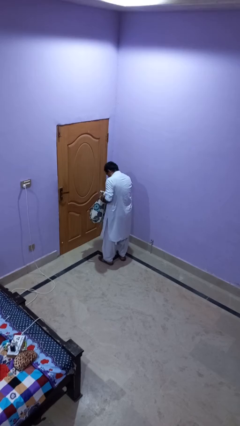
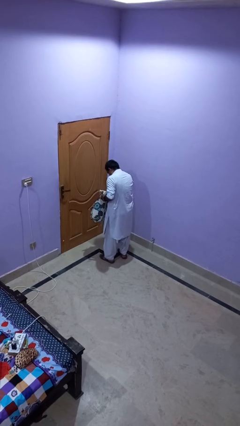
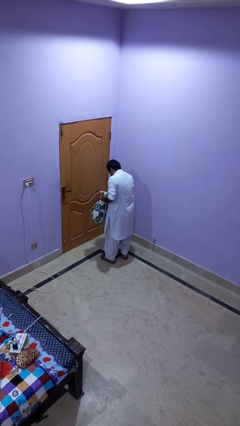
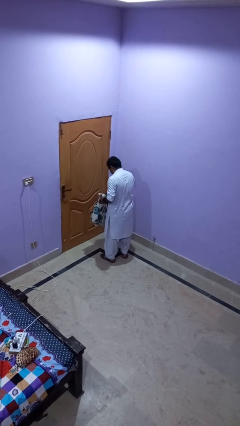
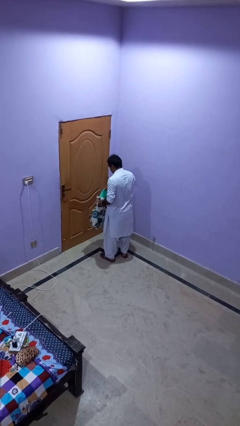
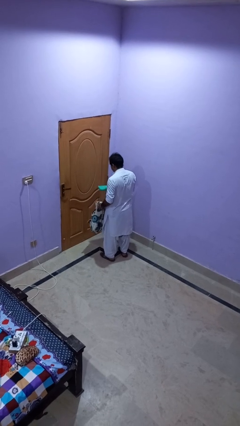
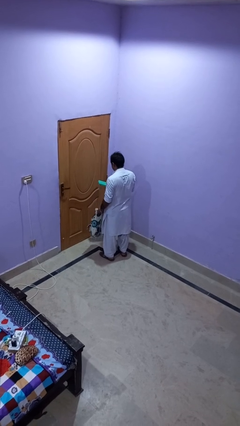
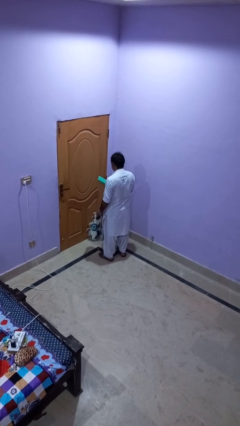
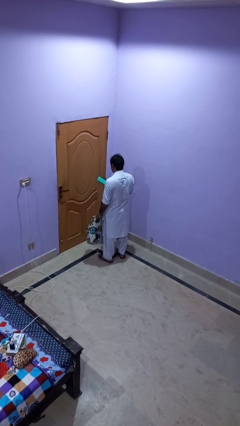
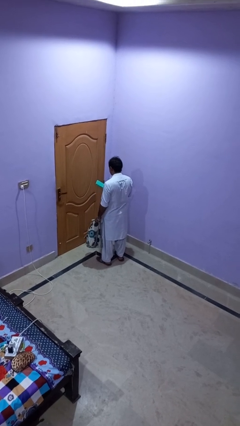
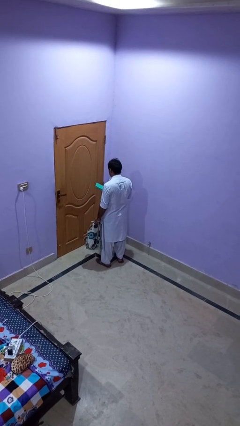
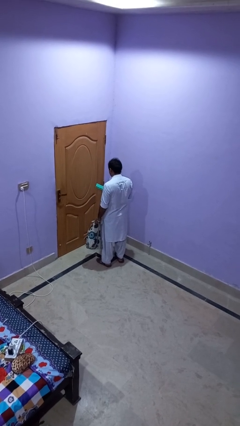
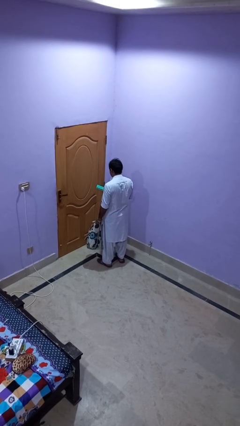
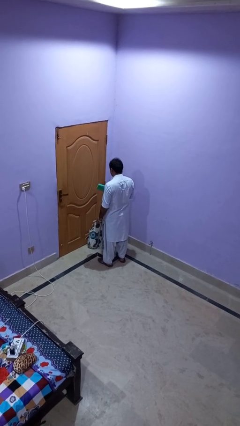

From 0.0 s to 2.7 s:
person takes object from backpack

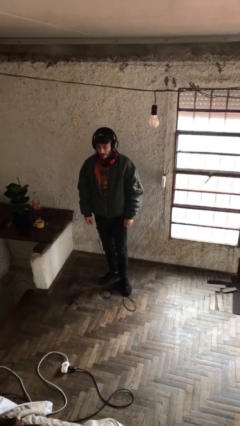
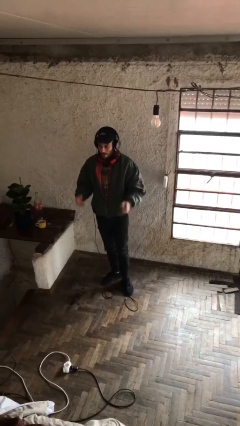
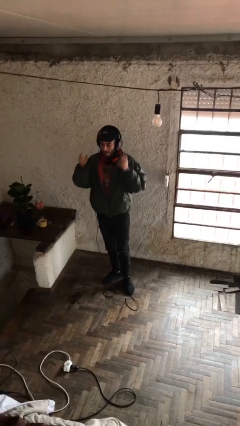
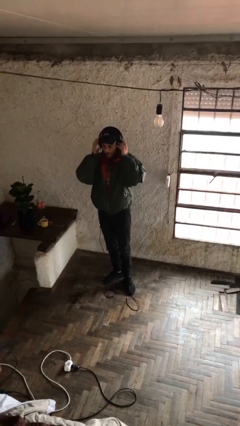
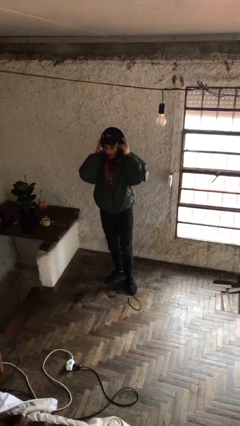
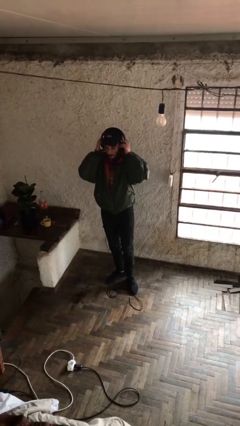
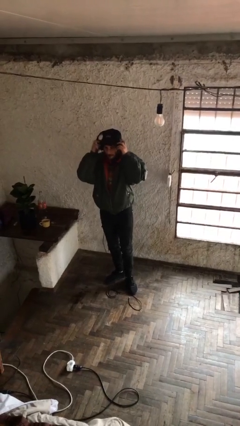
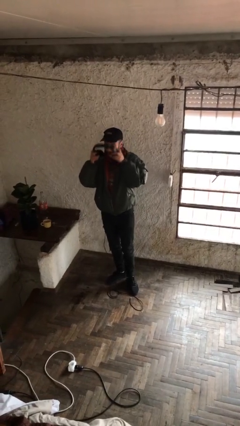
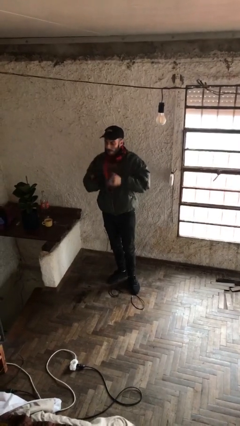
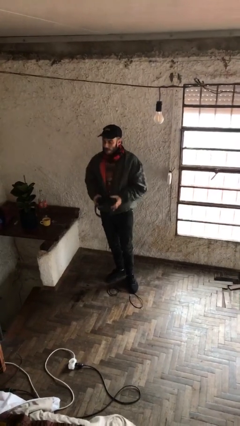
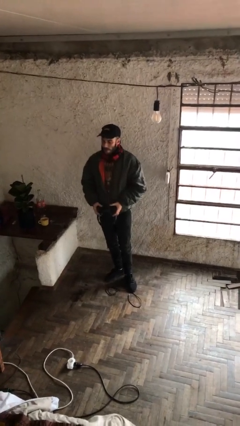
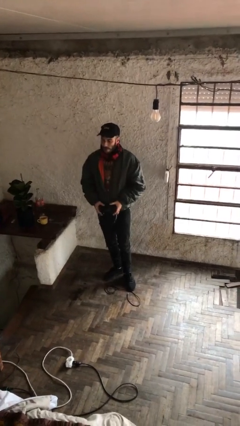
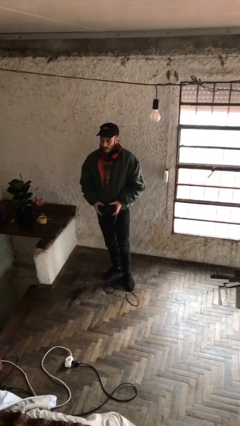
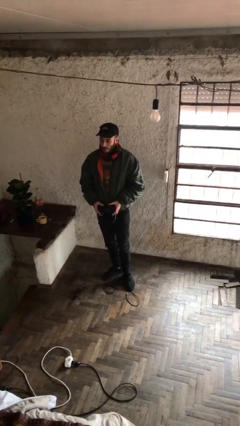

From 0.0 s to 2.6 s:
person takes off headphones

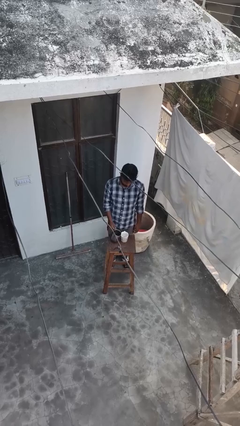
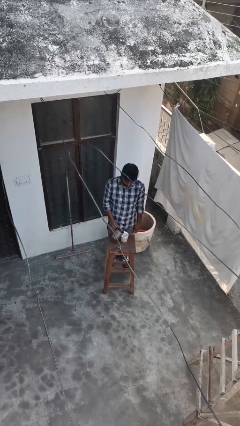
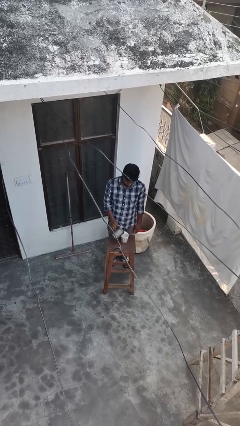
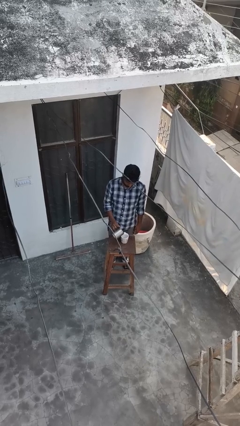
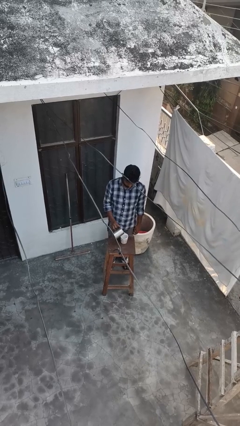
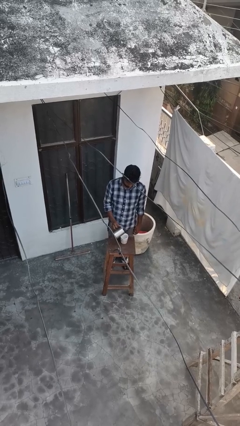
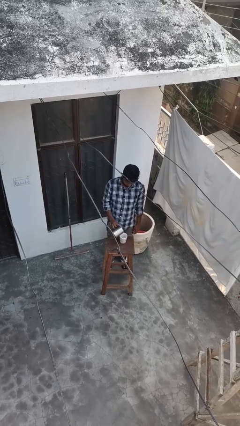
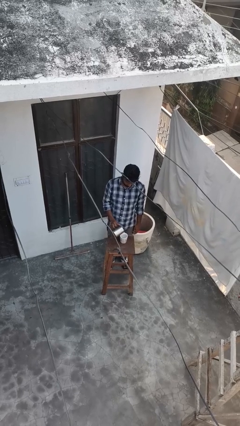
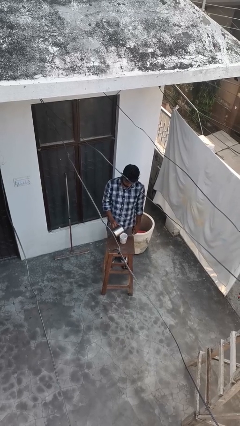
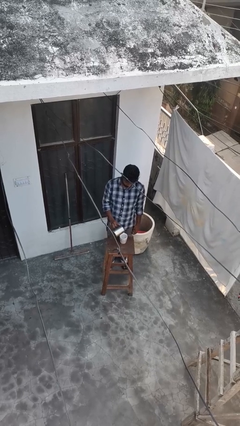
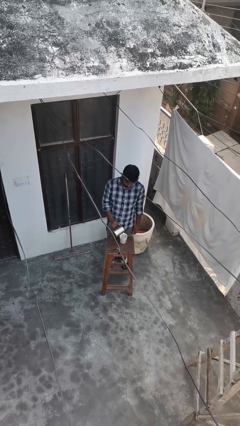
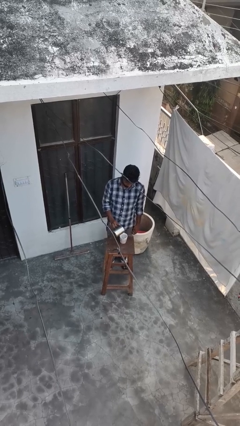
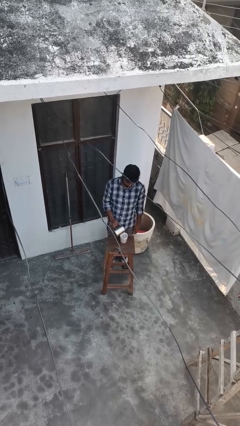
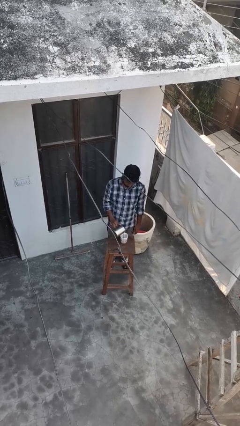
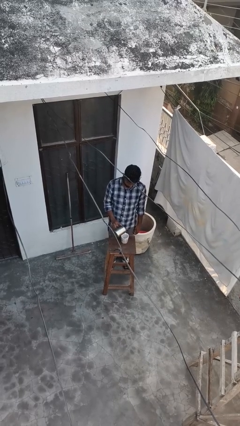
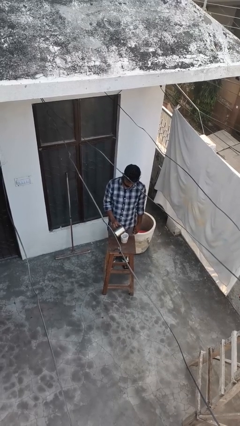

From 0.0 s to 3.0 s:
person pours coffee into mug

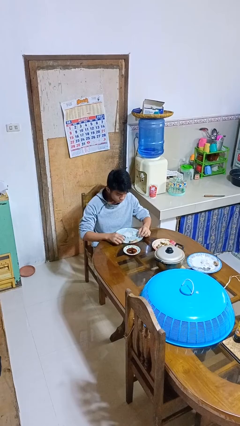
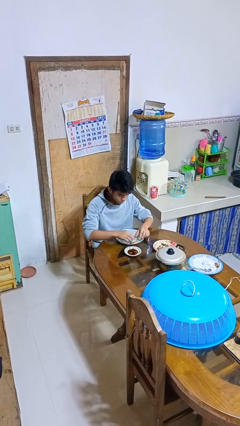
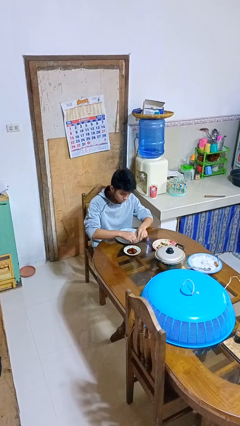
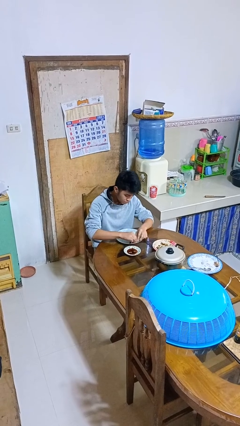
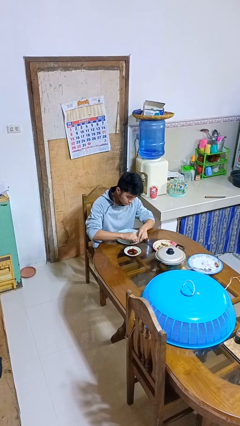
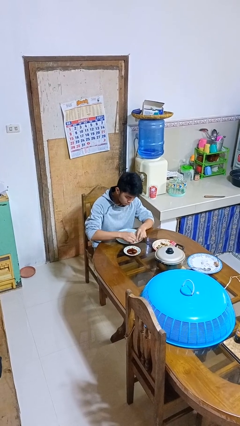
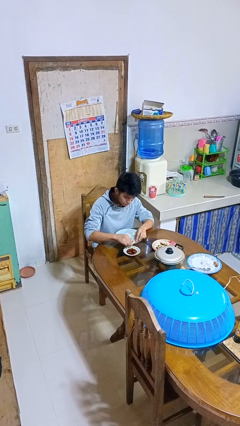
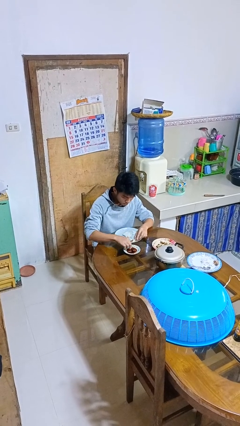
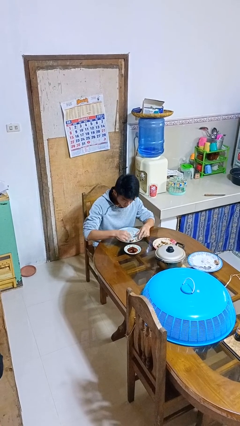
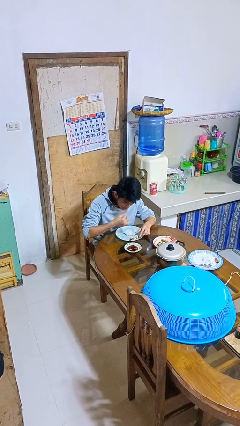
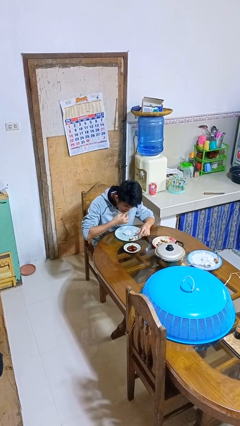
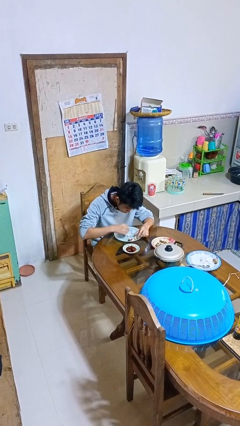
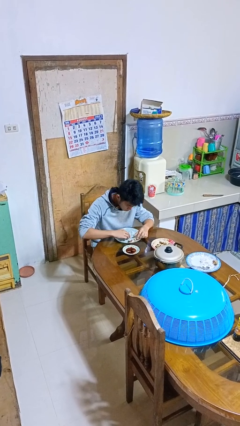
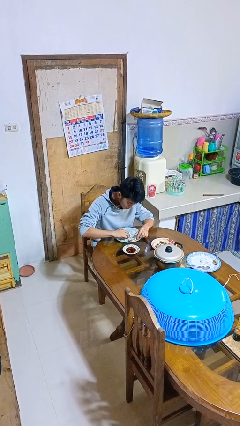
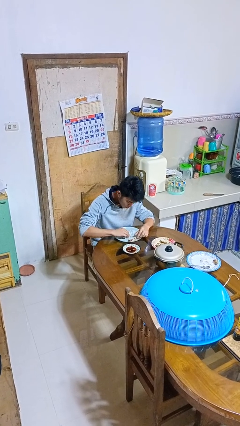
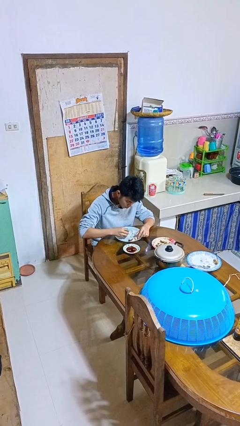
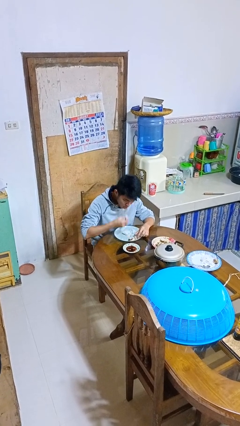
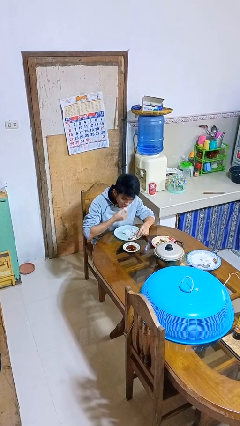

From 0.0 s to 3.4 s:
person eats with hands

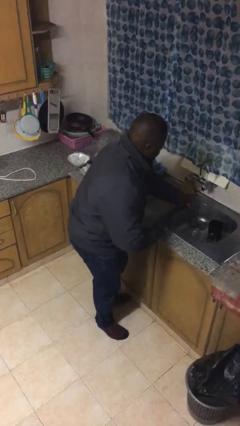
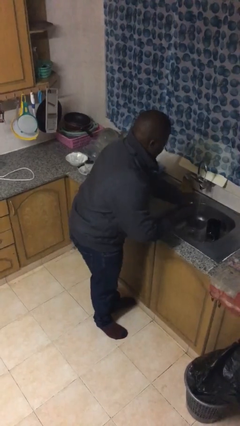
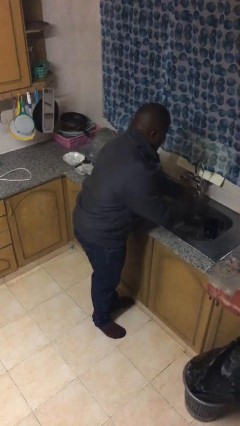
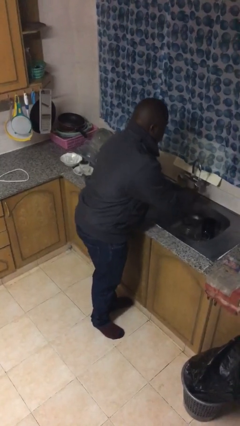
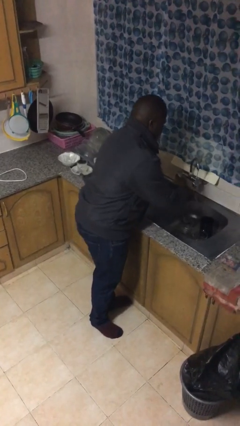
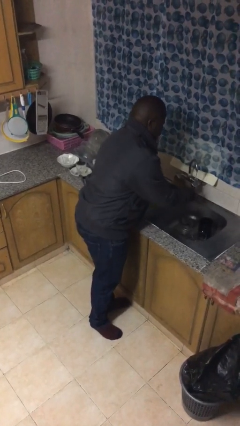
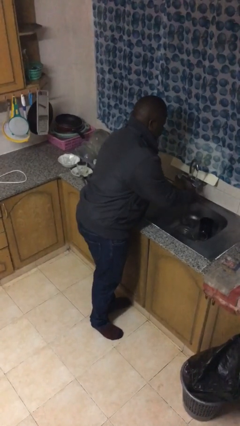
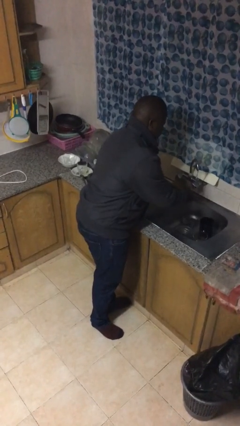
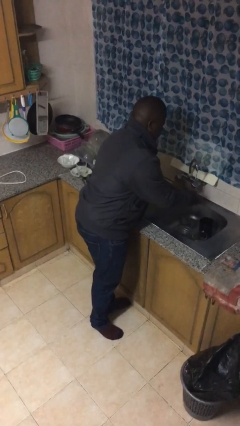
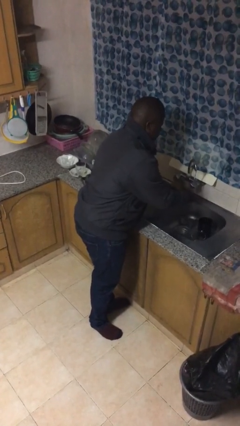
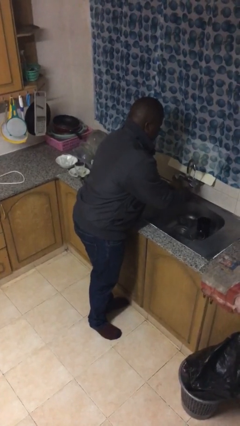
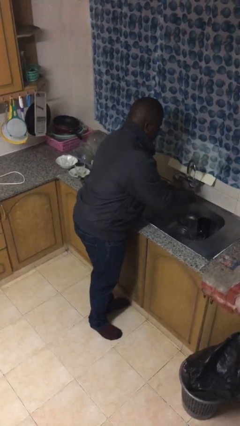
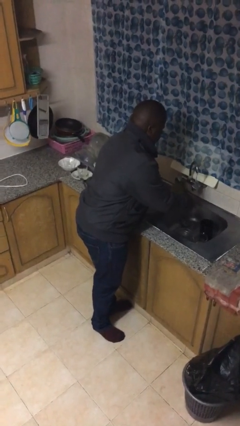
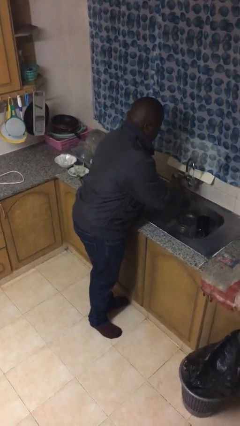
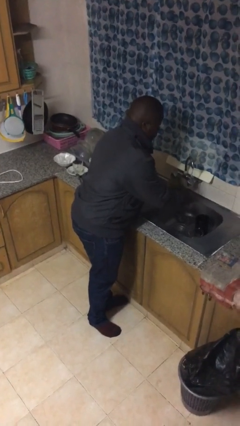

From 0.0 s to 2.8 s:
person washes hands

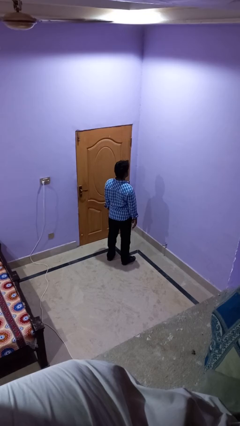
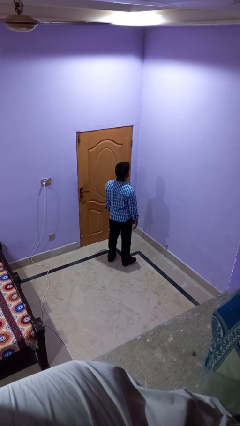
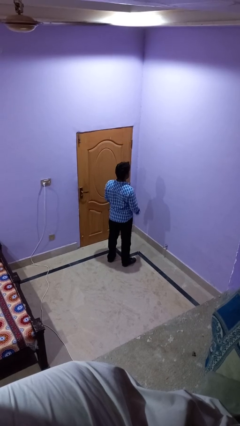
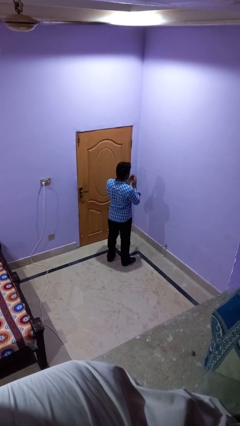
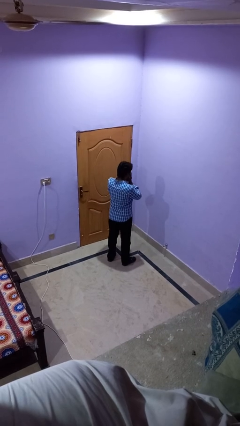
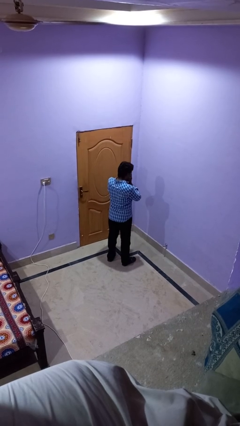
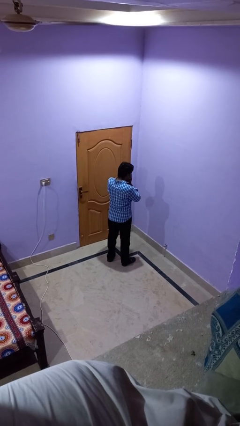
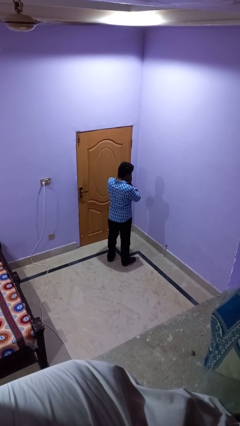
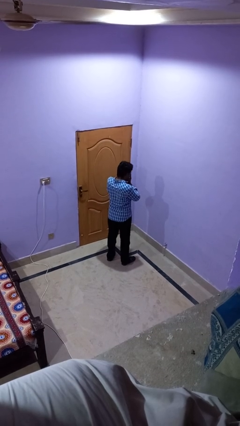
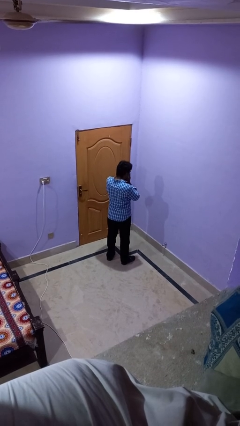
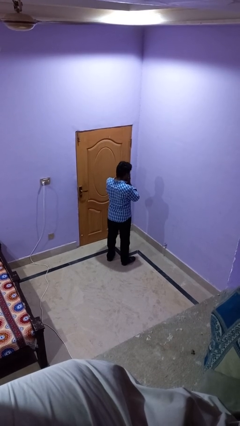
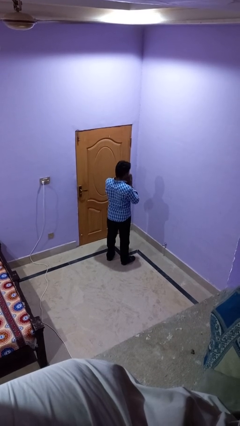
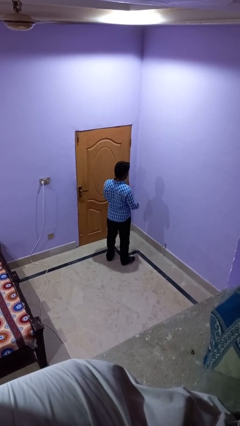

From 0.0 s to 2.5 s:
person sneezes into hand

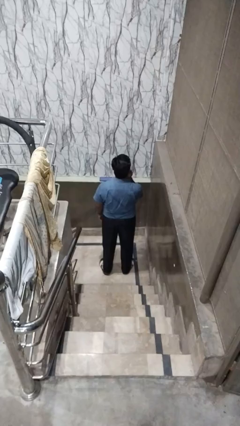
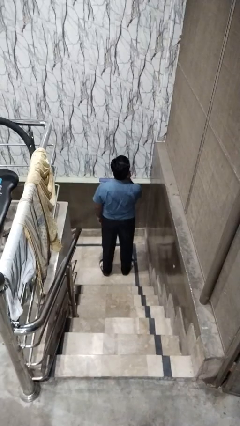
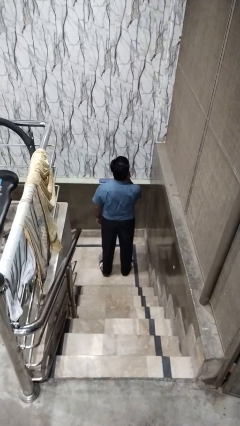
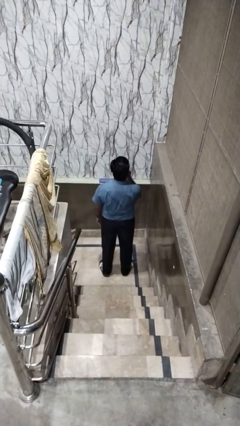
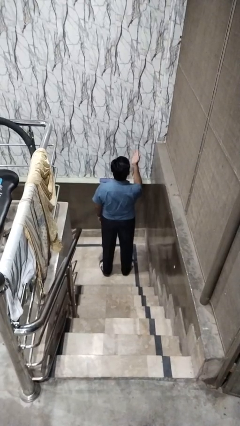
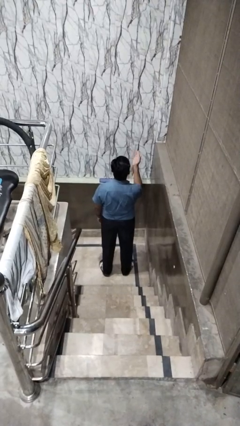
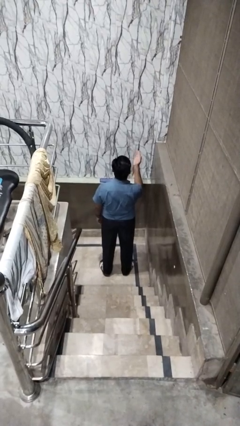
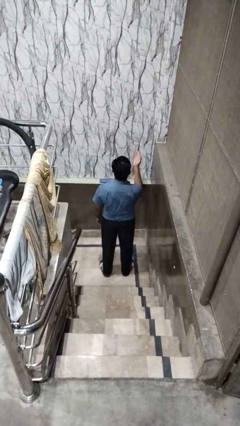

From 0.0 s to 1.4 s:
person gestures blow kiss
